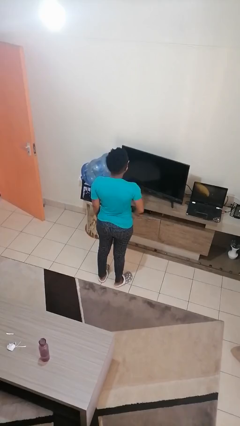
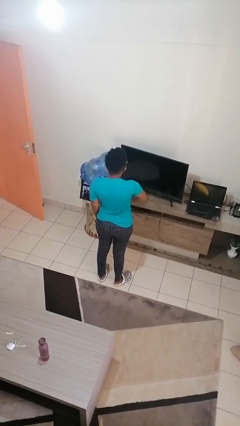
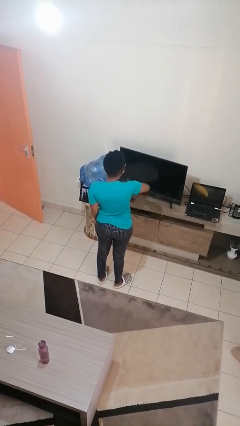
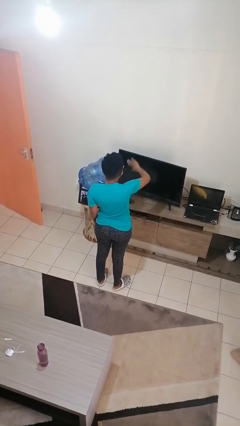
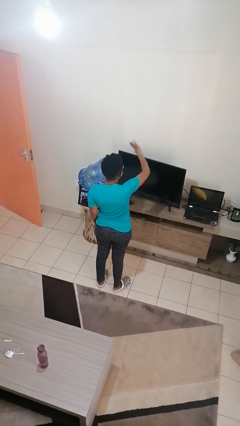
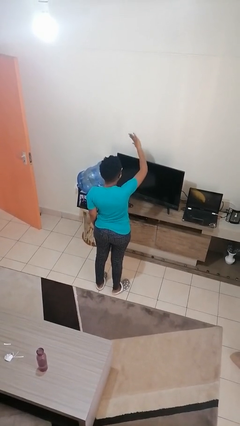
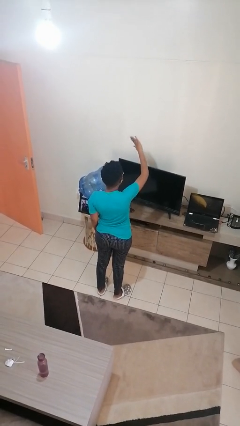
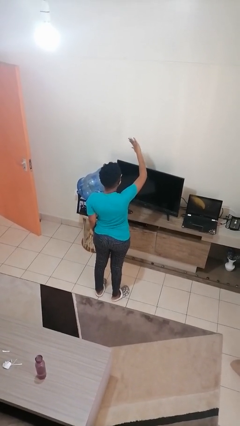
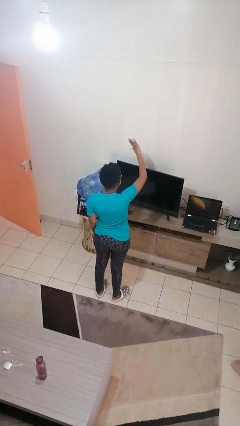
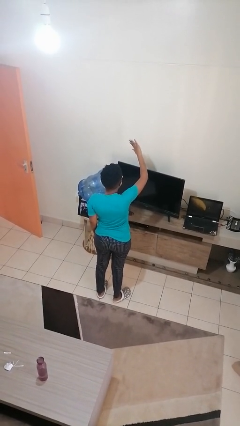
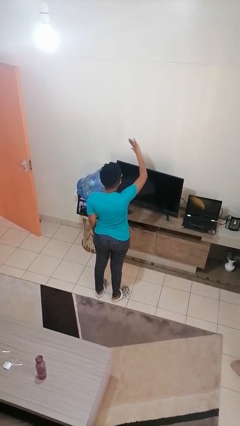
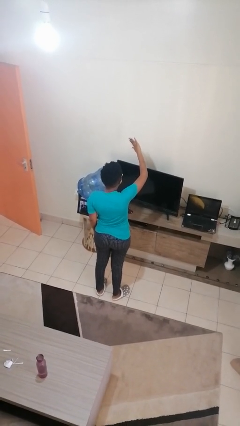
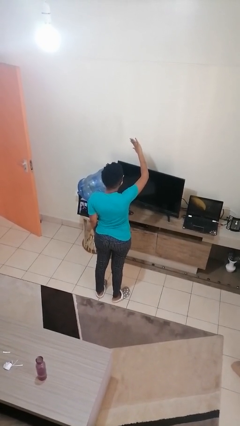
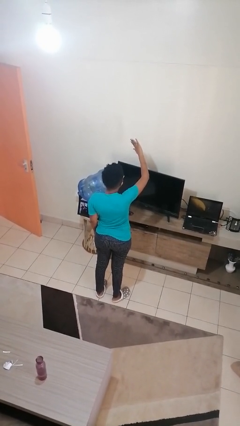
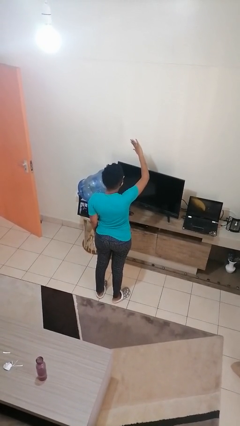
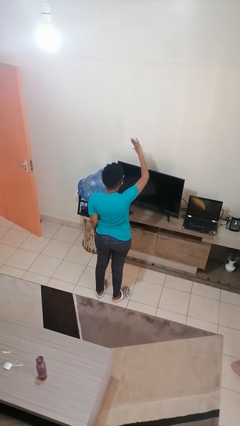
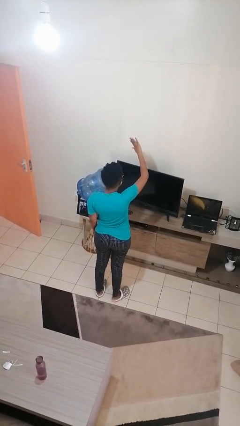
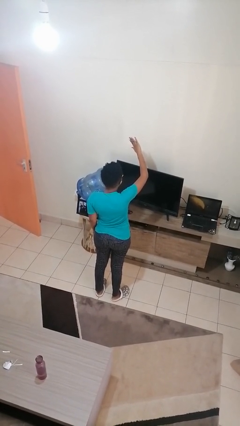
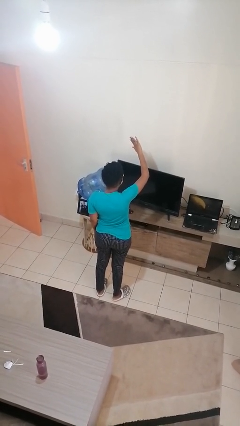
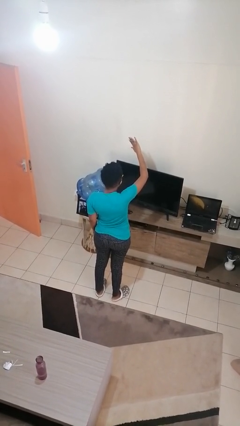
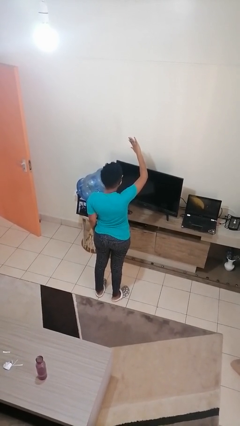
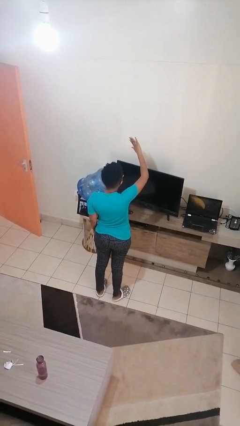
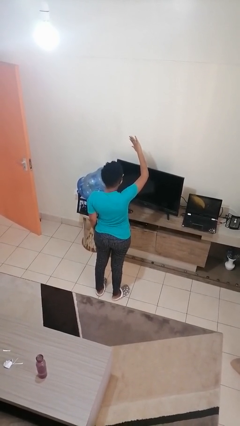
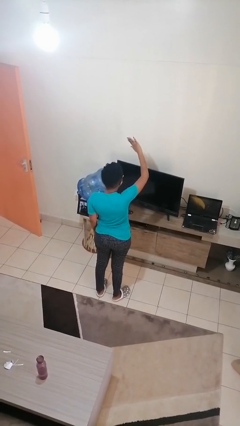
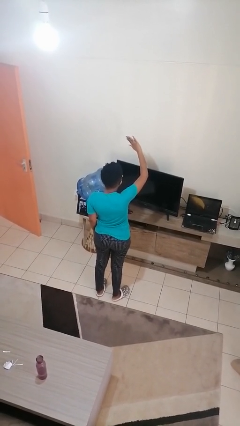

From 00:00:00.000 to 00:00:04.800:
person gestures swipe up

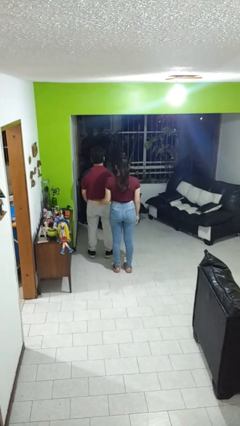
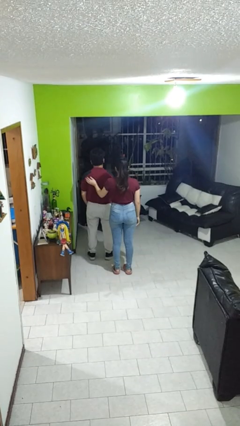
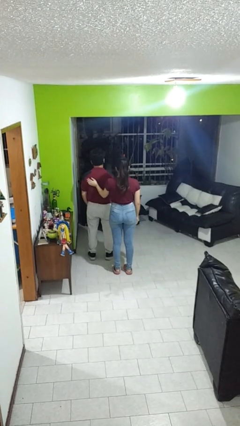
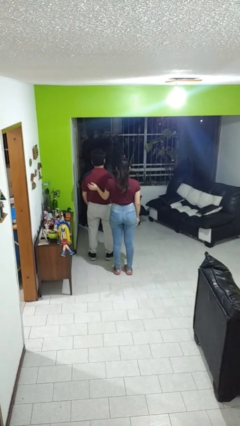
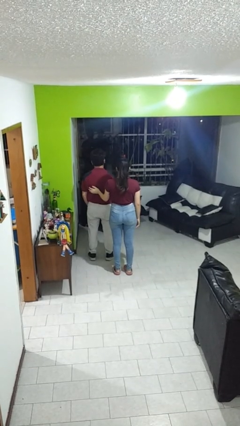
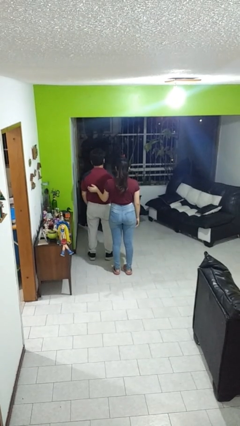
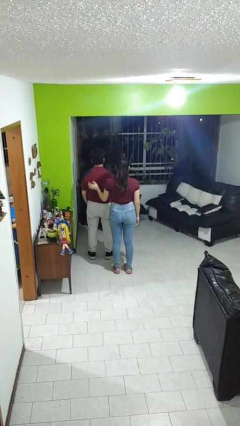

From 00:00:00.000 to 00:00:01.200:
person touches back of person

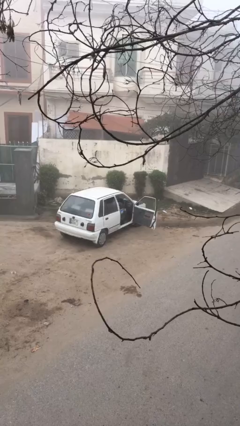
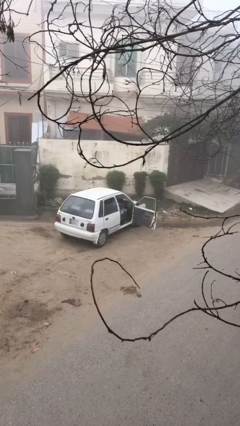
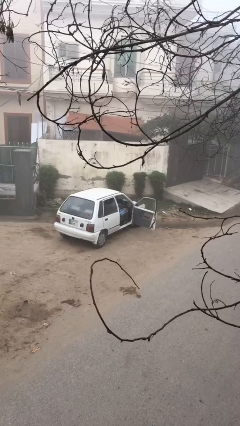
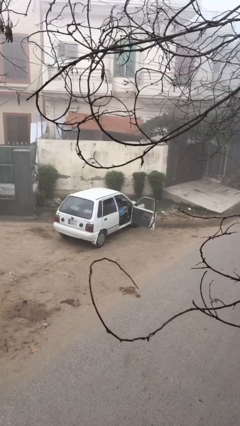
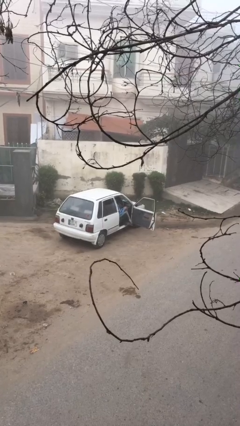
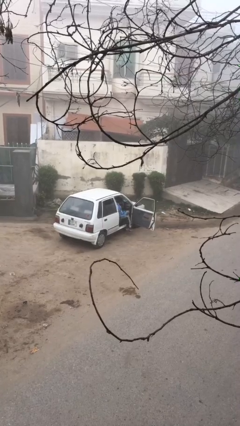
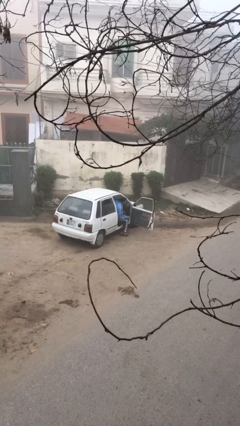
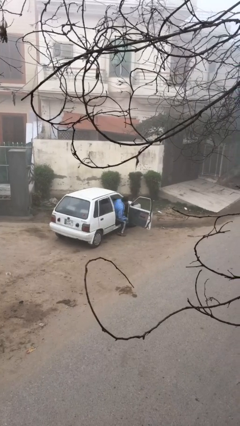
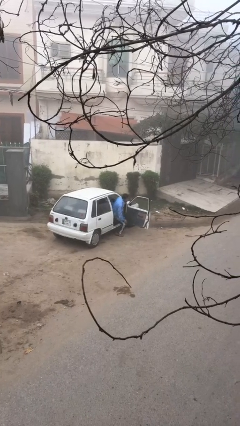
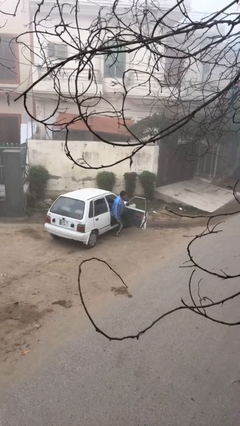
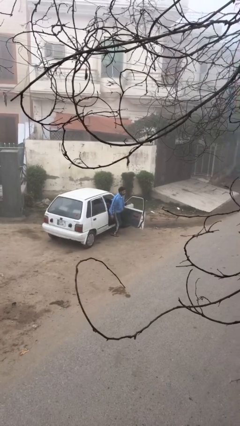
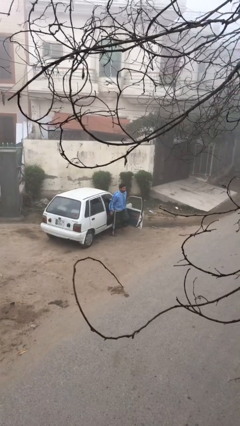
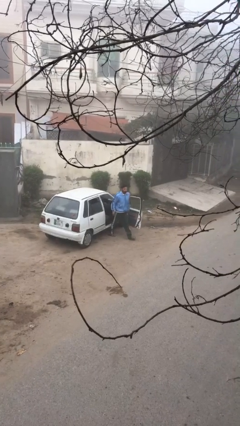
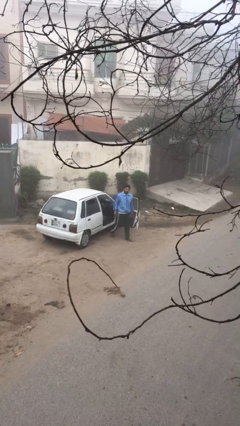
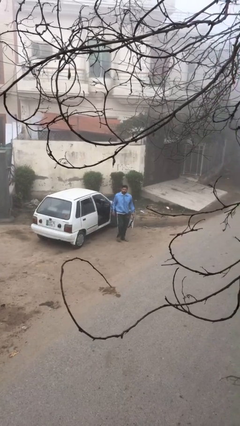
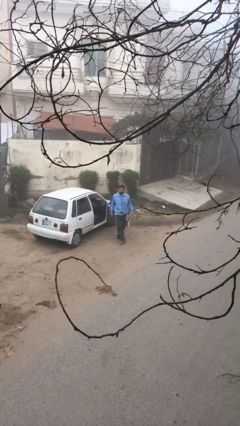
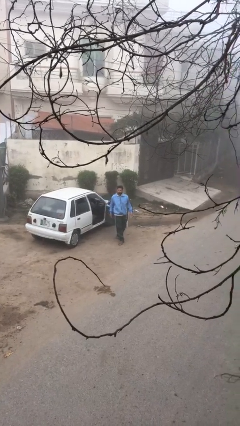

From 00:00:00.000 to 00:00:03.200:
person exits car

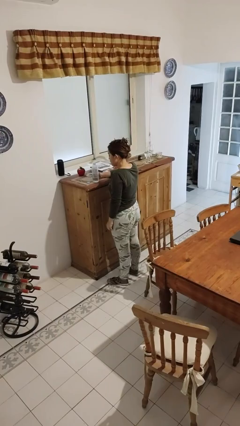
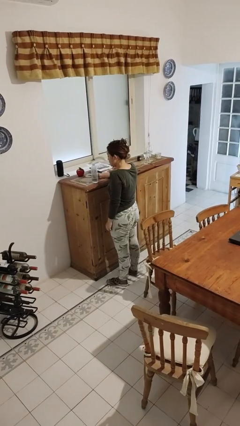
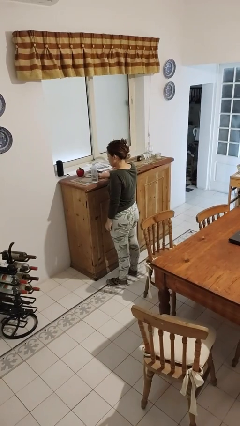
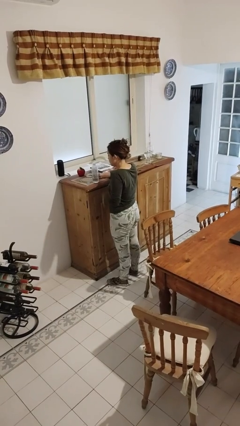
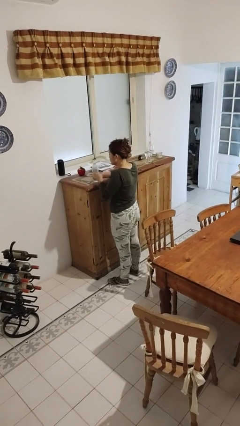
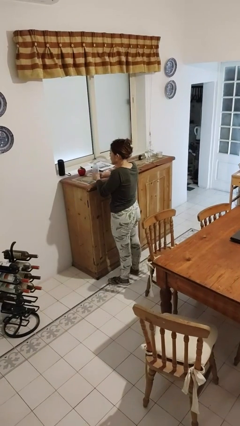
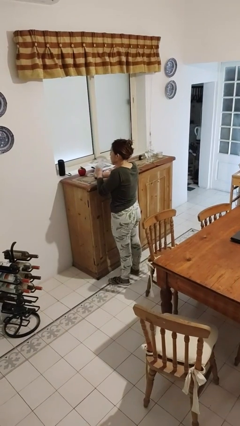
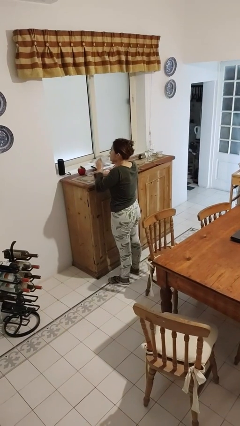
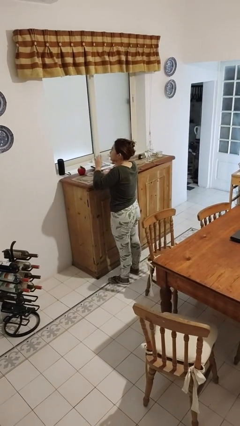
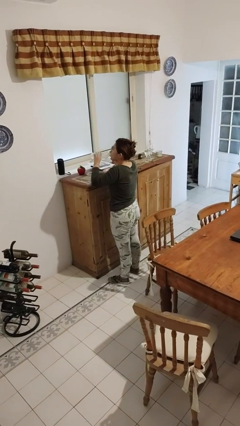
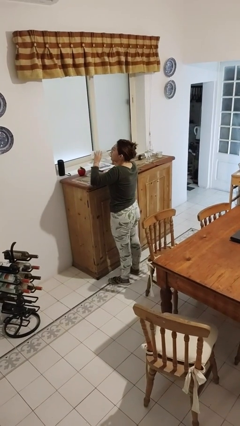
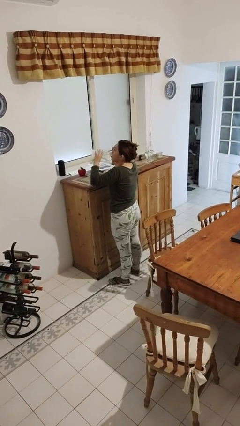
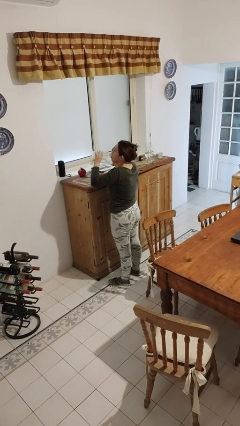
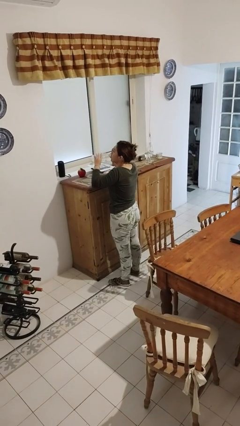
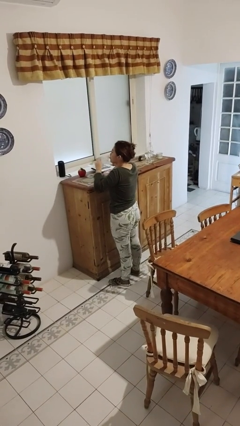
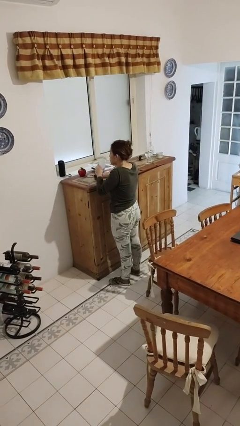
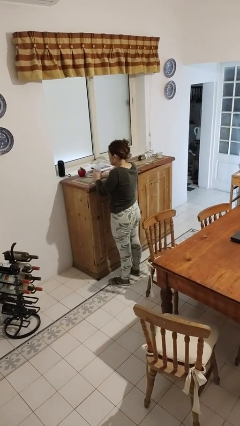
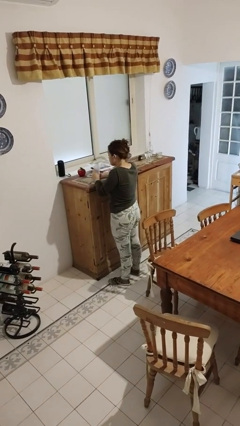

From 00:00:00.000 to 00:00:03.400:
person drinks from bottle

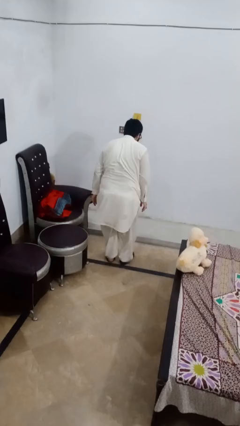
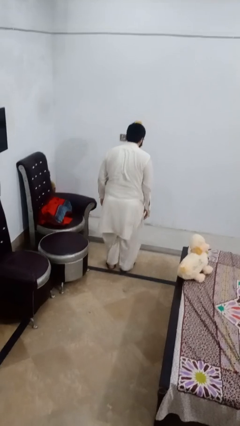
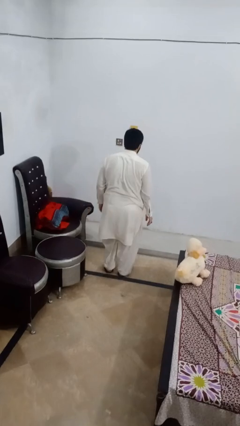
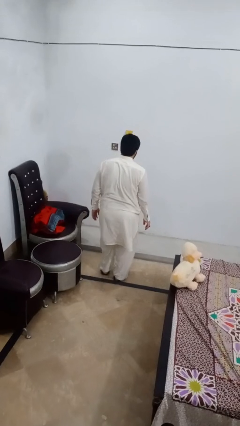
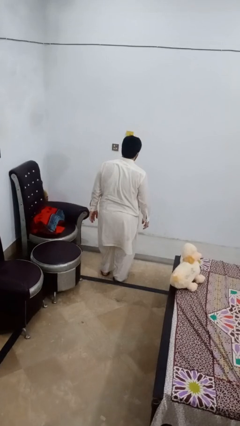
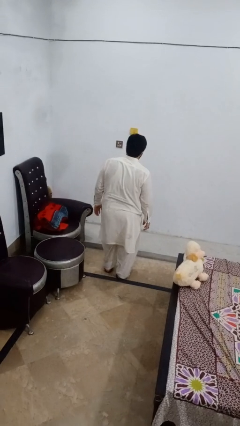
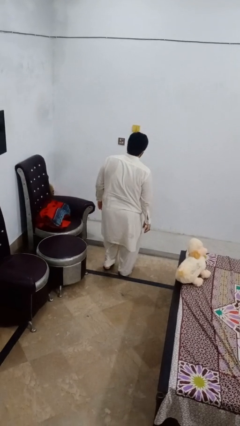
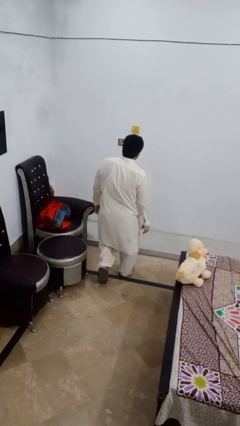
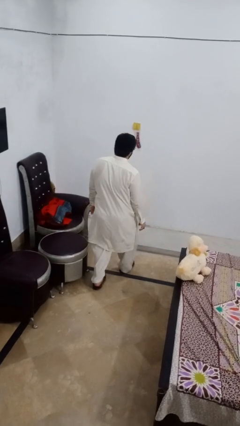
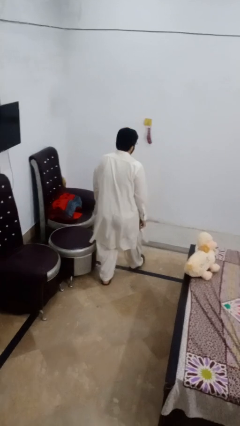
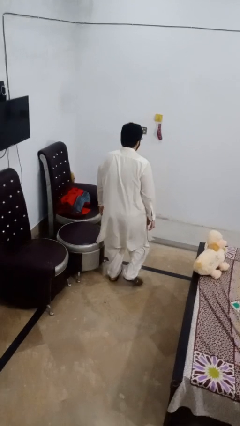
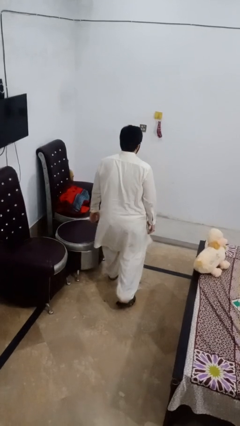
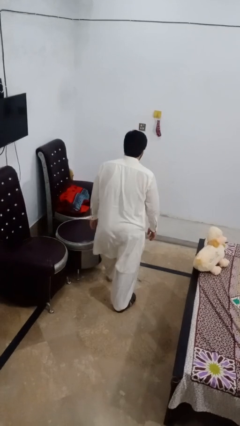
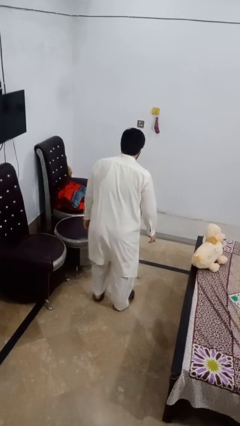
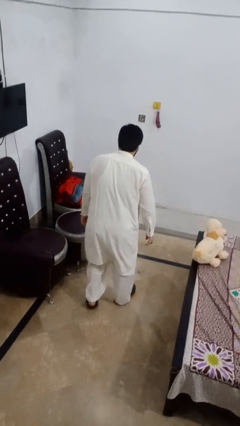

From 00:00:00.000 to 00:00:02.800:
person stands up from floor

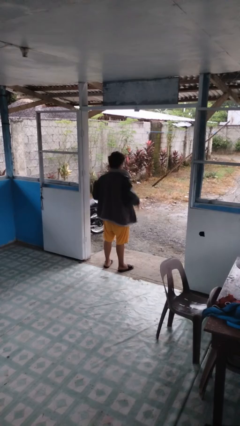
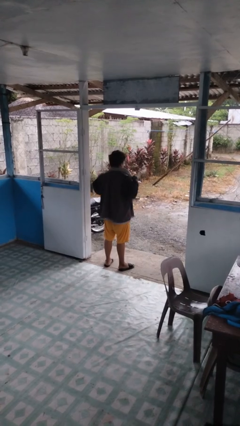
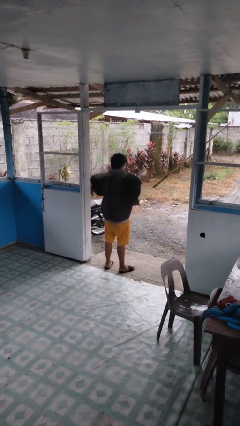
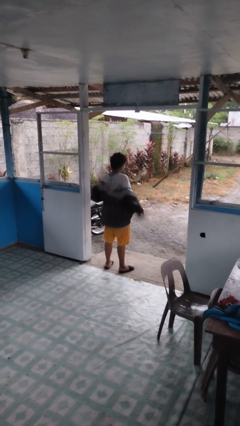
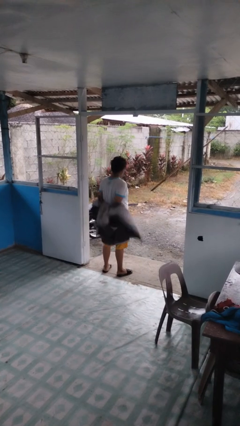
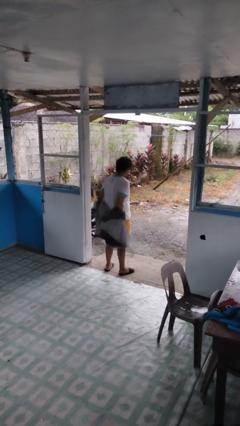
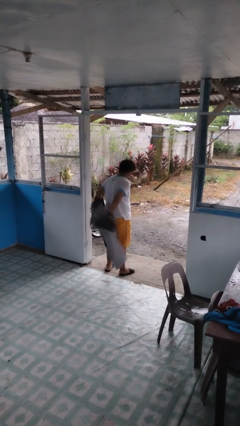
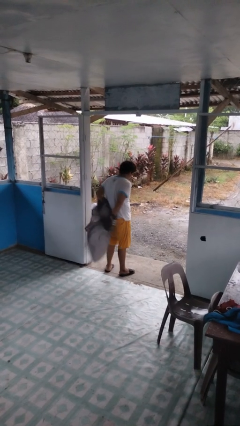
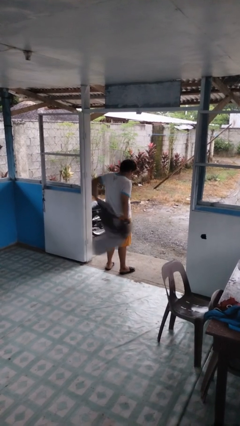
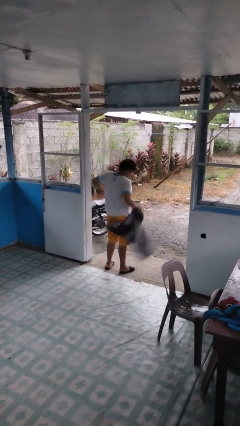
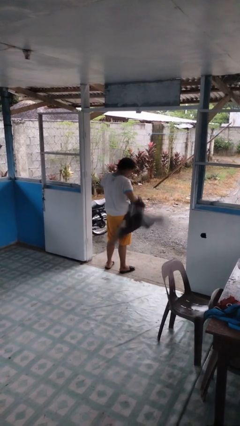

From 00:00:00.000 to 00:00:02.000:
person takes off jacket
